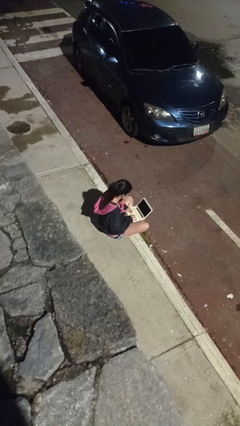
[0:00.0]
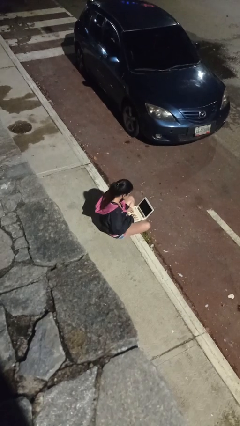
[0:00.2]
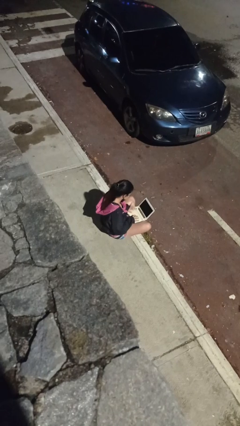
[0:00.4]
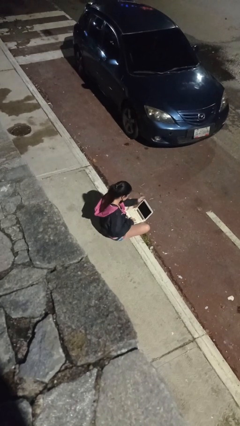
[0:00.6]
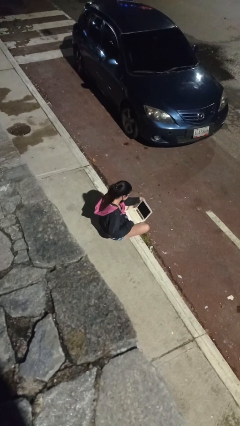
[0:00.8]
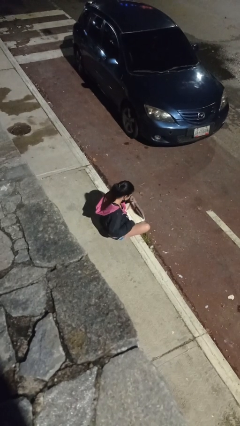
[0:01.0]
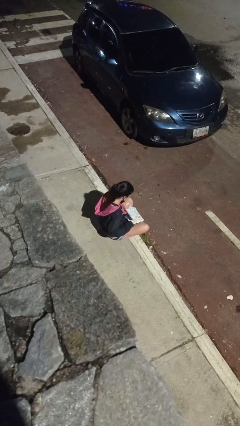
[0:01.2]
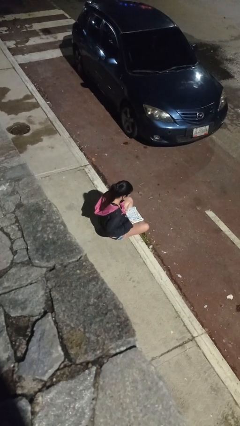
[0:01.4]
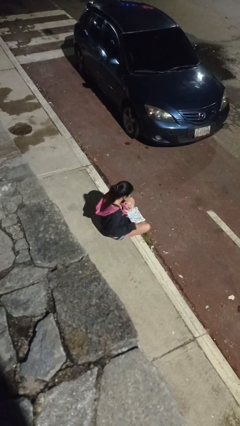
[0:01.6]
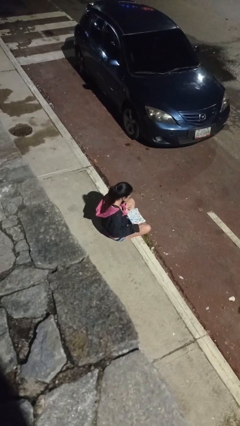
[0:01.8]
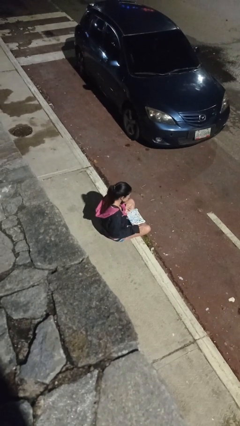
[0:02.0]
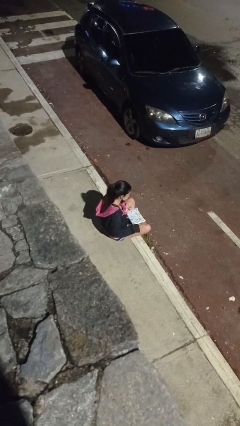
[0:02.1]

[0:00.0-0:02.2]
person closes laptop

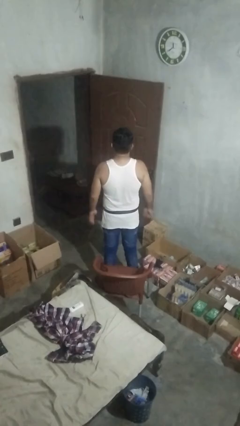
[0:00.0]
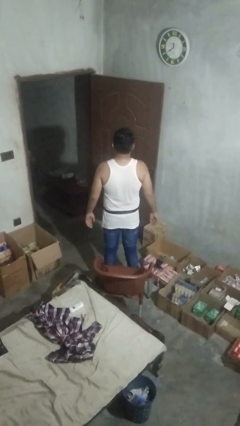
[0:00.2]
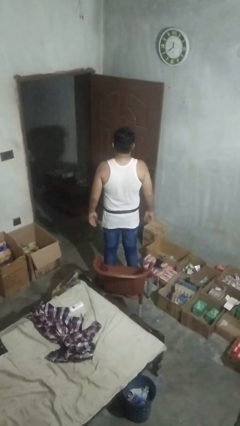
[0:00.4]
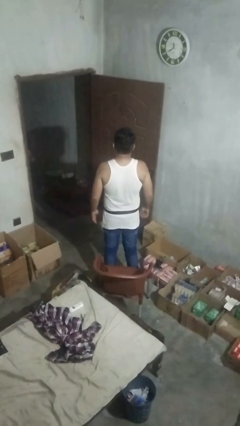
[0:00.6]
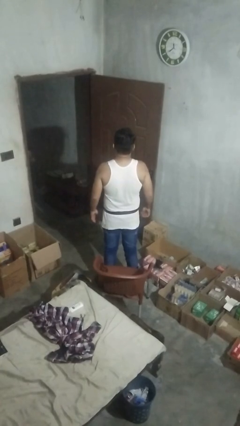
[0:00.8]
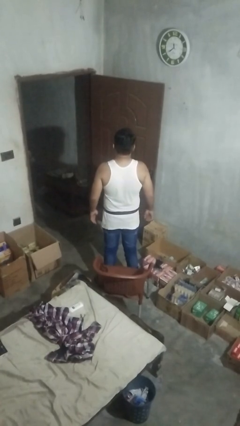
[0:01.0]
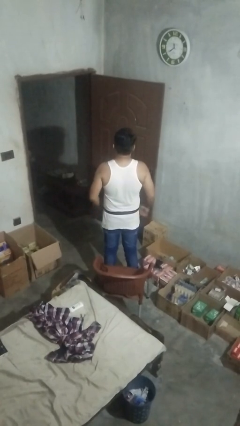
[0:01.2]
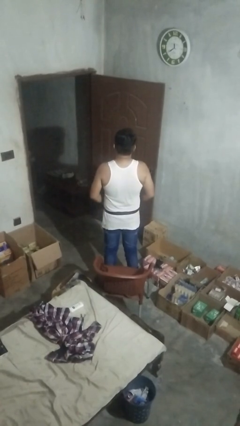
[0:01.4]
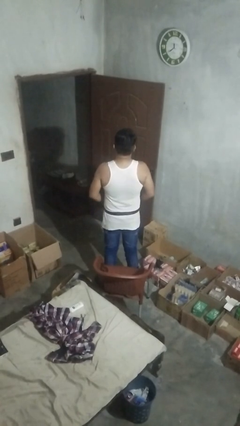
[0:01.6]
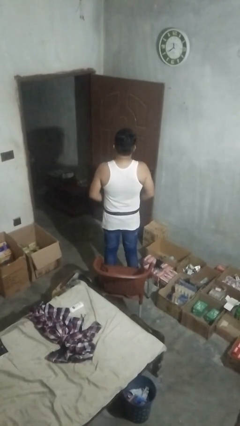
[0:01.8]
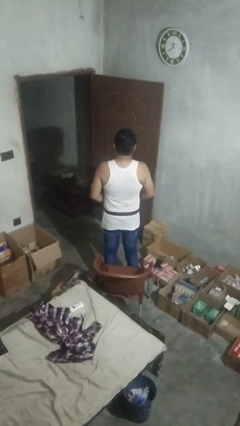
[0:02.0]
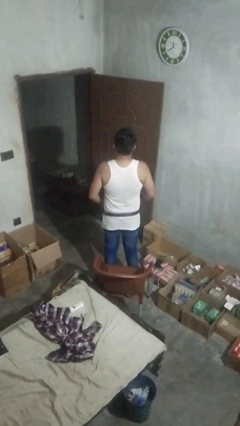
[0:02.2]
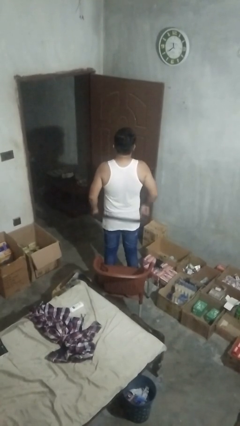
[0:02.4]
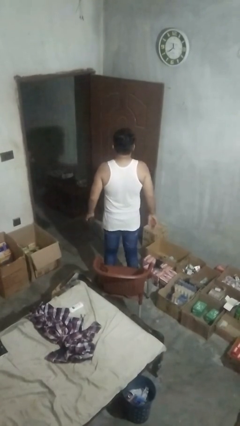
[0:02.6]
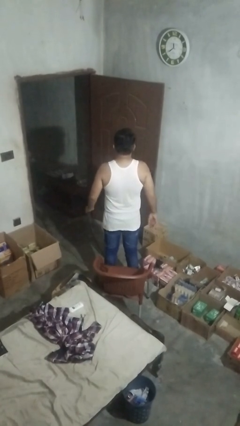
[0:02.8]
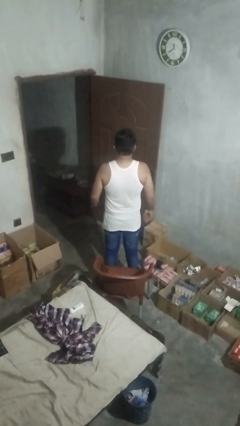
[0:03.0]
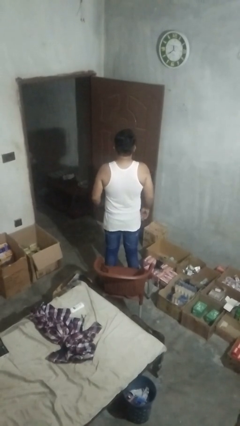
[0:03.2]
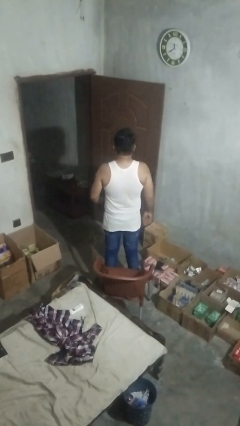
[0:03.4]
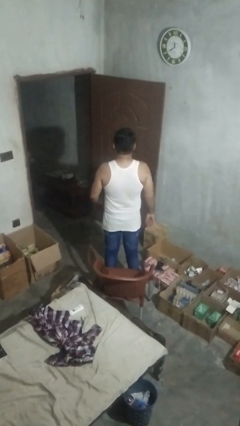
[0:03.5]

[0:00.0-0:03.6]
person takes off belt

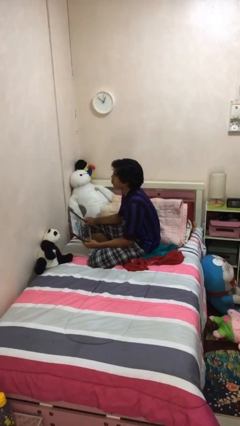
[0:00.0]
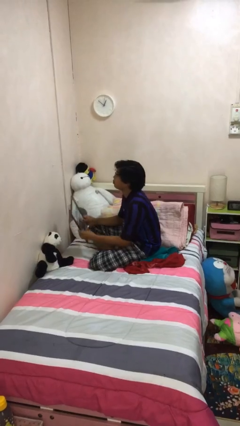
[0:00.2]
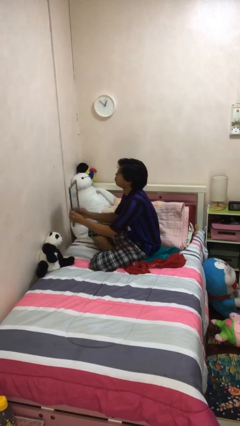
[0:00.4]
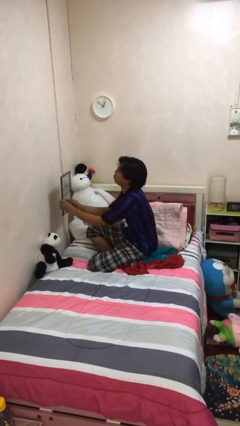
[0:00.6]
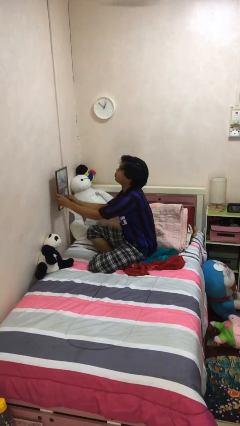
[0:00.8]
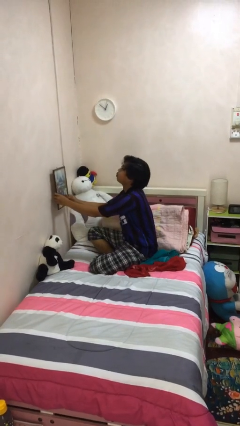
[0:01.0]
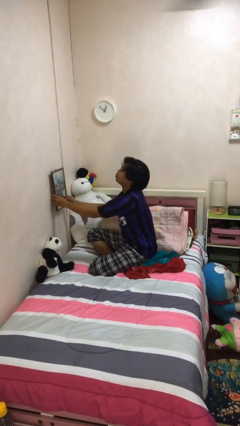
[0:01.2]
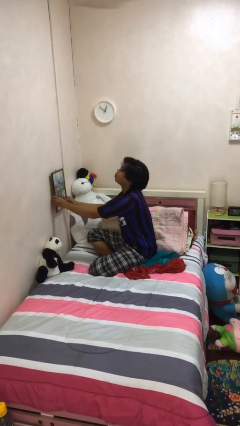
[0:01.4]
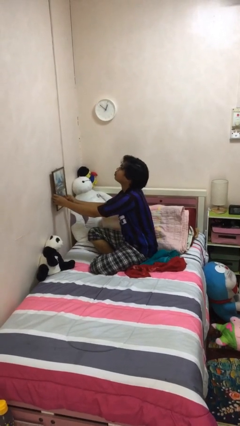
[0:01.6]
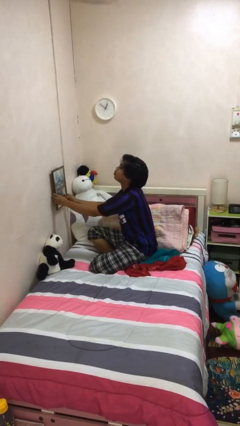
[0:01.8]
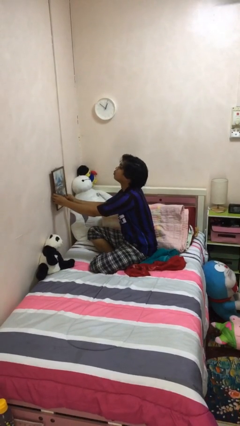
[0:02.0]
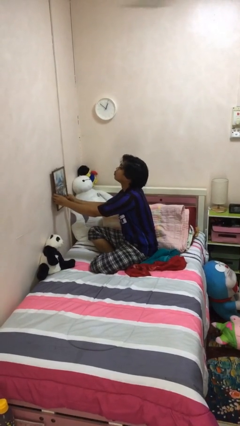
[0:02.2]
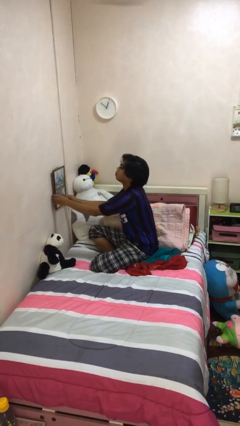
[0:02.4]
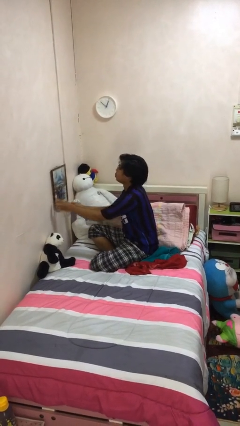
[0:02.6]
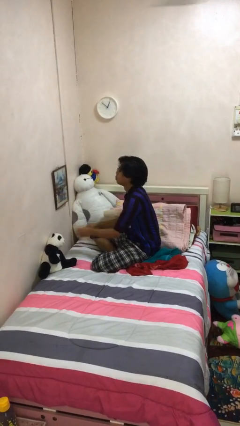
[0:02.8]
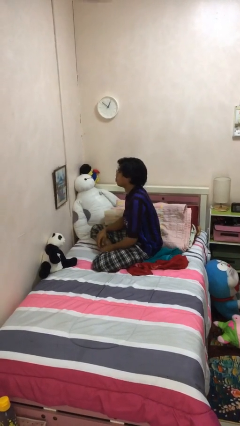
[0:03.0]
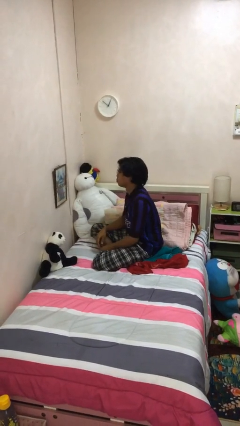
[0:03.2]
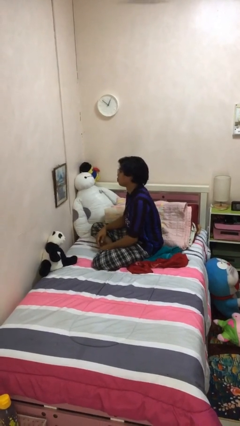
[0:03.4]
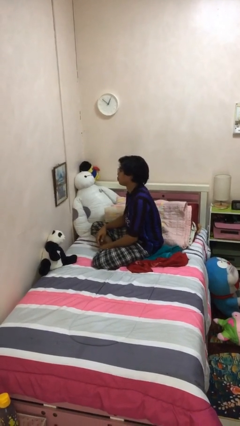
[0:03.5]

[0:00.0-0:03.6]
person puts up picture frame

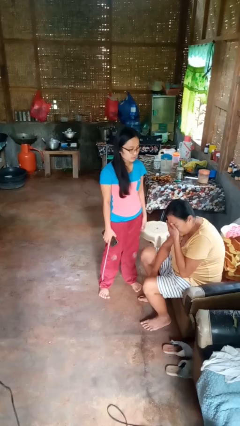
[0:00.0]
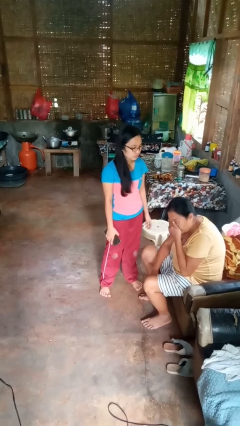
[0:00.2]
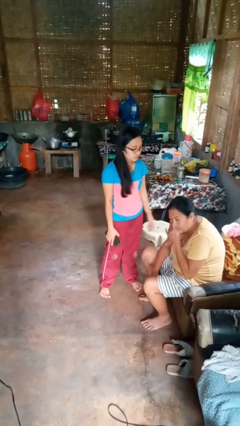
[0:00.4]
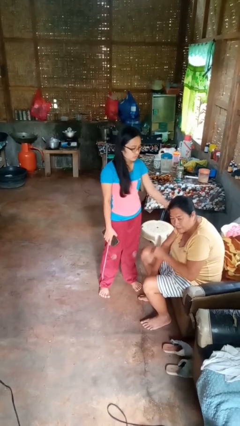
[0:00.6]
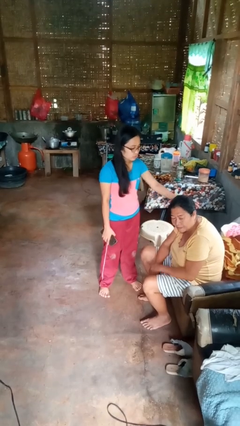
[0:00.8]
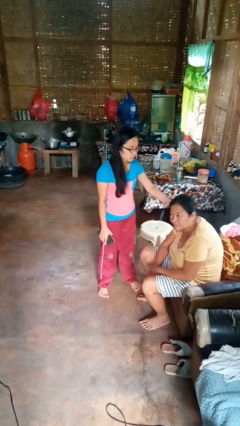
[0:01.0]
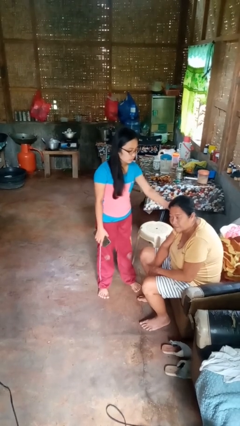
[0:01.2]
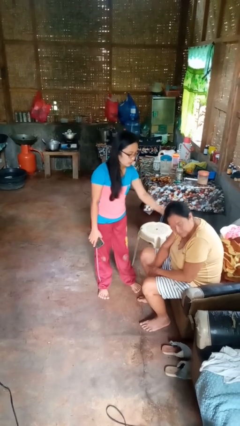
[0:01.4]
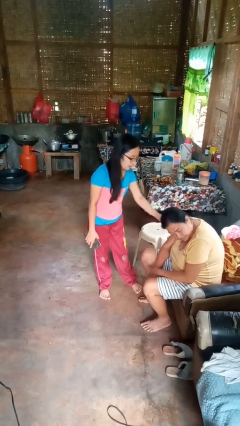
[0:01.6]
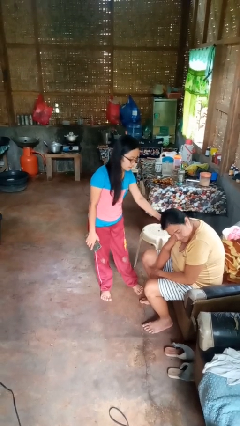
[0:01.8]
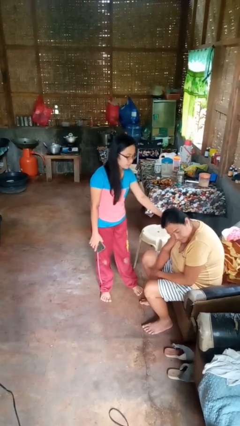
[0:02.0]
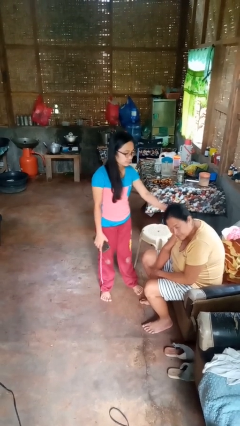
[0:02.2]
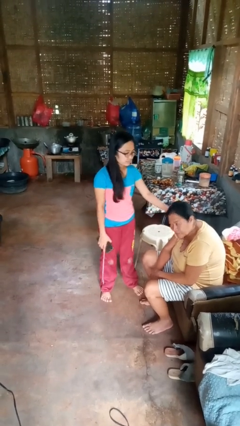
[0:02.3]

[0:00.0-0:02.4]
person grabs person by hair

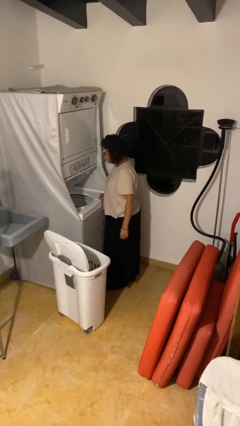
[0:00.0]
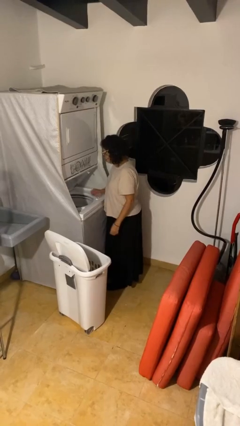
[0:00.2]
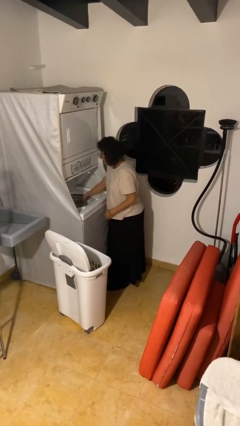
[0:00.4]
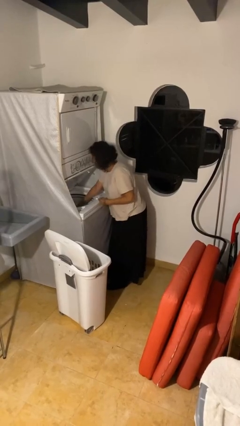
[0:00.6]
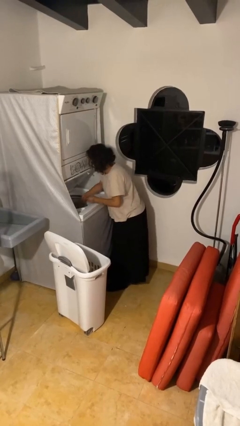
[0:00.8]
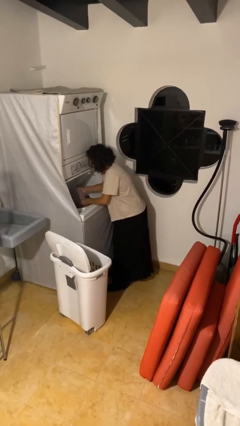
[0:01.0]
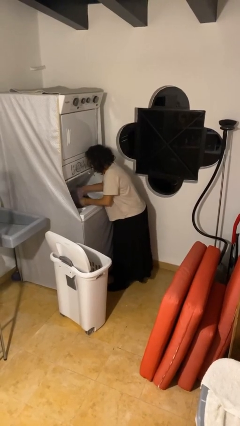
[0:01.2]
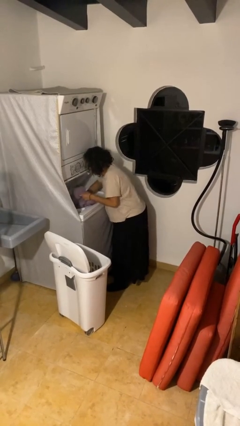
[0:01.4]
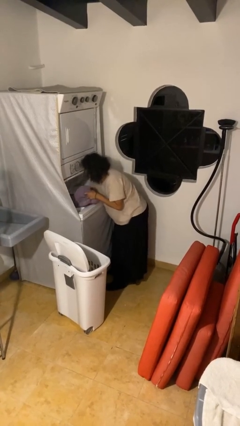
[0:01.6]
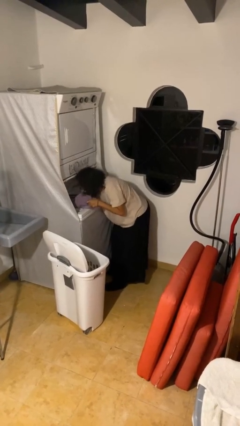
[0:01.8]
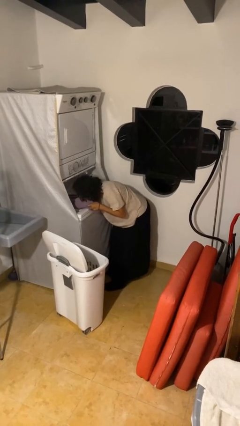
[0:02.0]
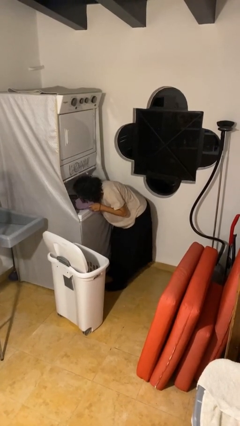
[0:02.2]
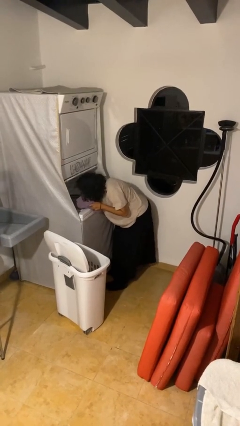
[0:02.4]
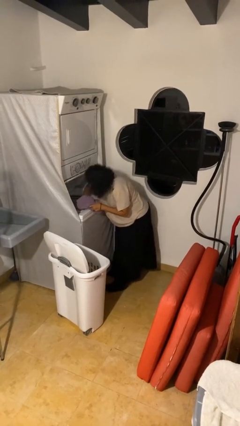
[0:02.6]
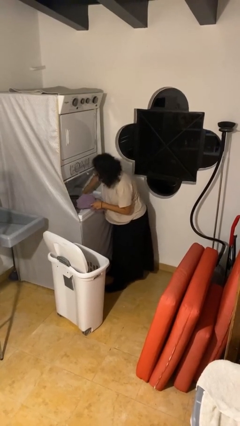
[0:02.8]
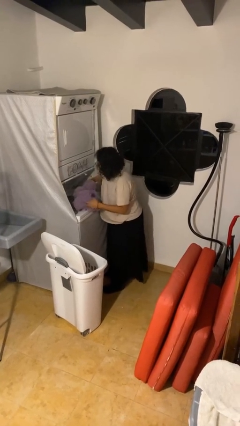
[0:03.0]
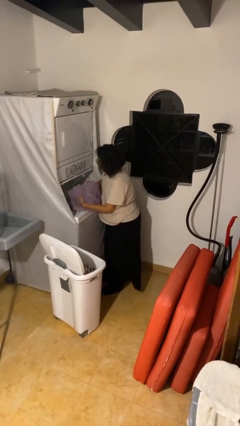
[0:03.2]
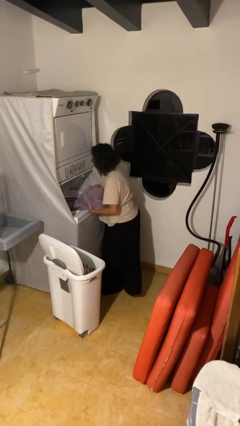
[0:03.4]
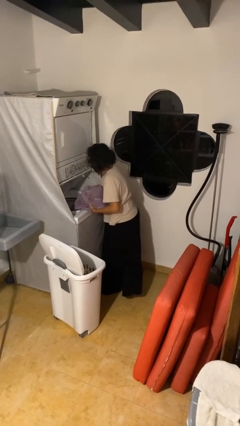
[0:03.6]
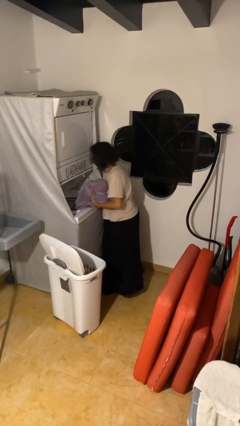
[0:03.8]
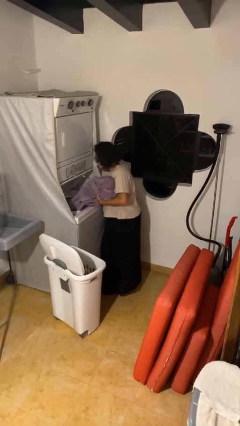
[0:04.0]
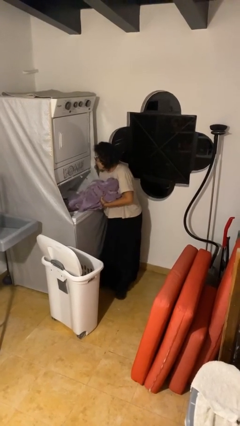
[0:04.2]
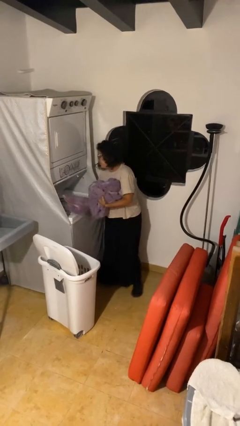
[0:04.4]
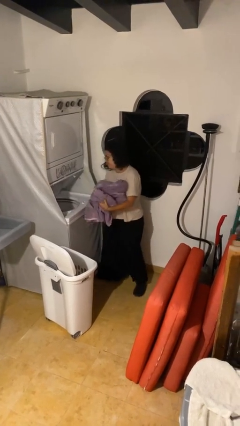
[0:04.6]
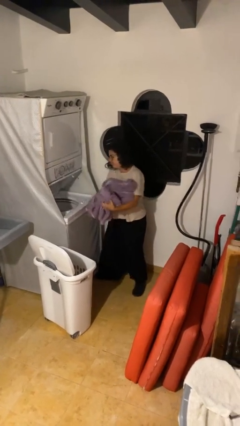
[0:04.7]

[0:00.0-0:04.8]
person unloads clotheswasher

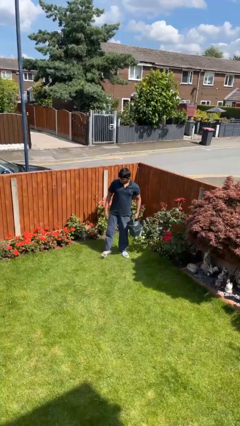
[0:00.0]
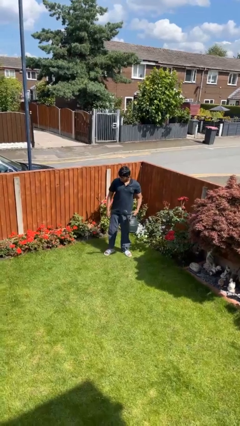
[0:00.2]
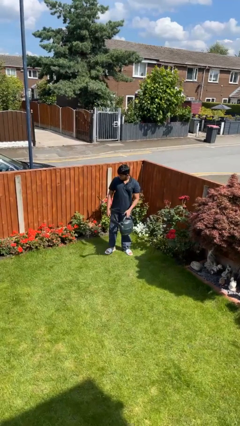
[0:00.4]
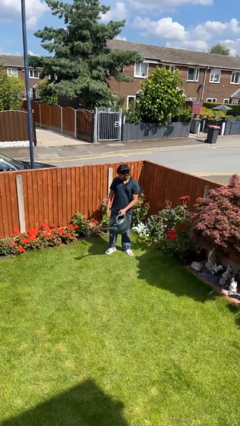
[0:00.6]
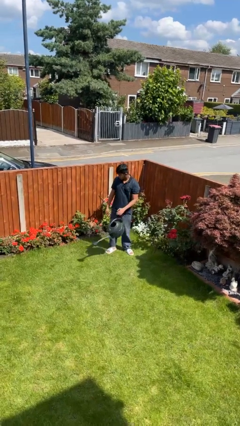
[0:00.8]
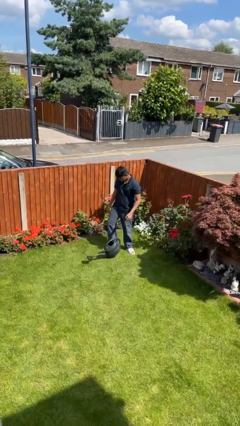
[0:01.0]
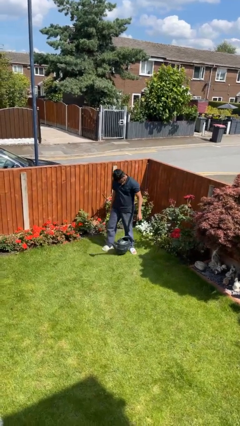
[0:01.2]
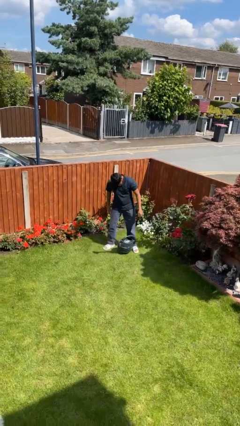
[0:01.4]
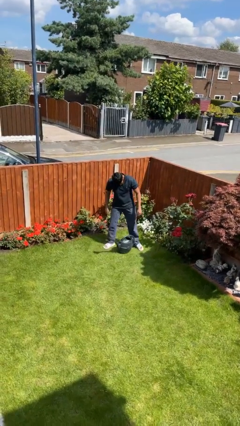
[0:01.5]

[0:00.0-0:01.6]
person drops object
